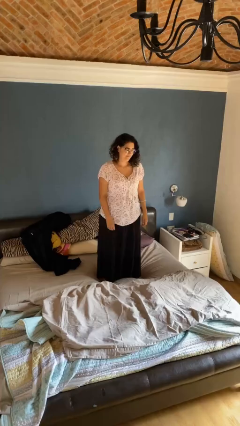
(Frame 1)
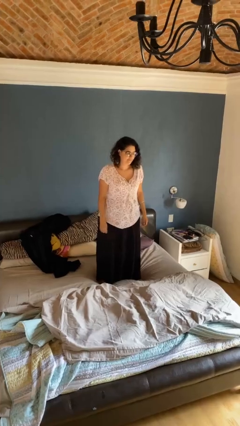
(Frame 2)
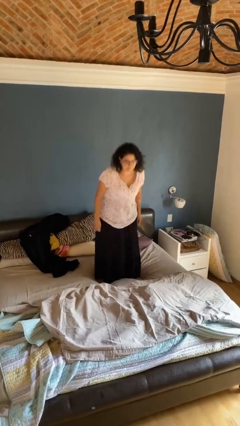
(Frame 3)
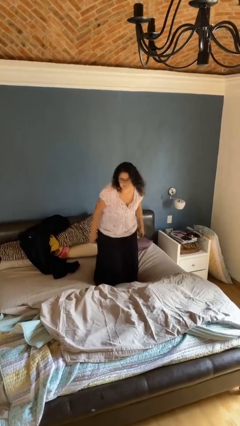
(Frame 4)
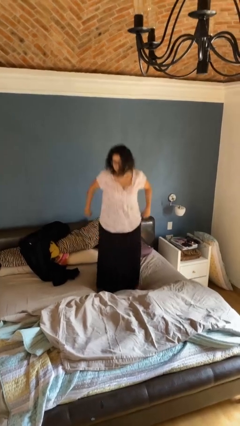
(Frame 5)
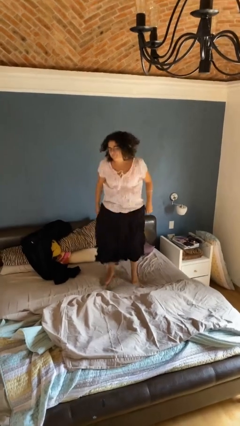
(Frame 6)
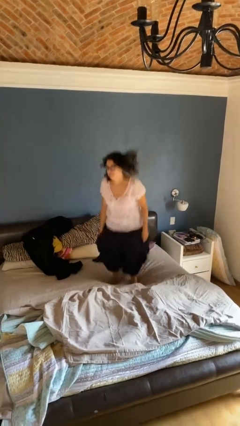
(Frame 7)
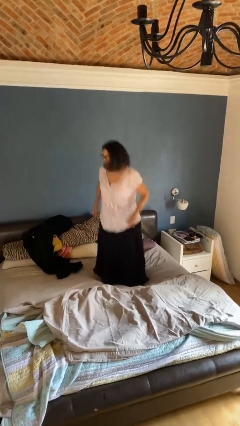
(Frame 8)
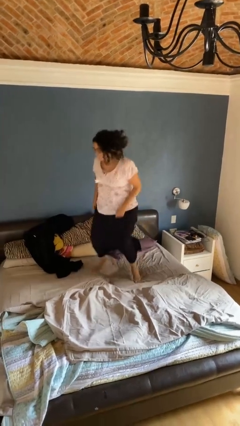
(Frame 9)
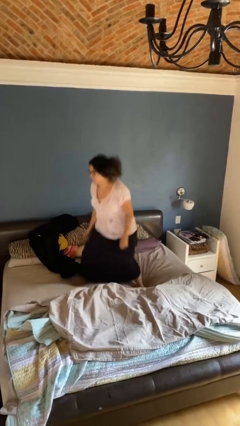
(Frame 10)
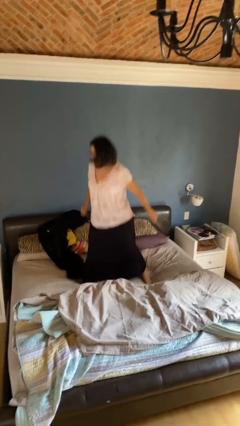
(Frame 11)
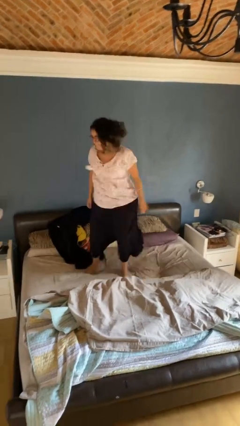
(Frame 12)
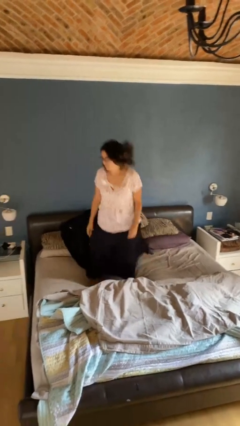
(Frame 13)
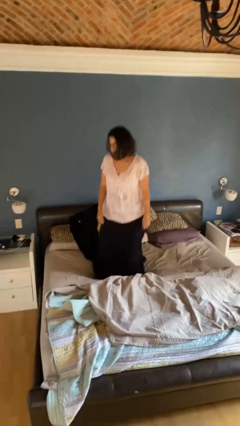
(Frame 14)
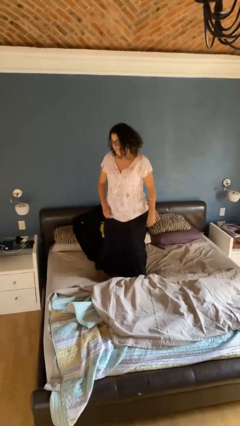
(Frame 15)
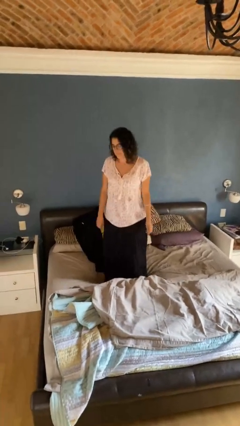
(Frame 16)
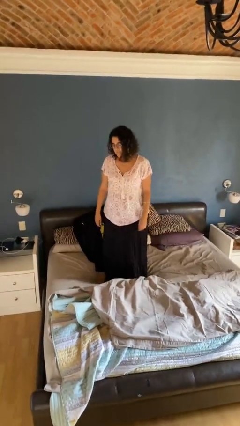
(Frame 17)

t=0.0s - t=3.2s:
person jumps on bed

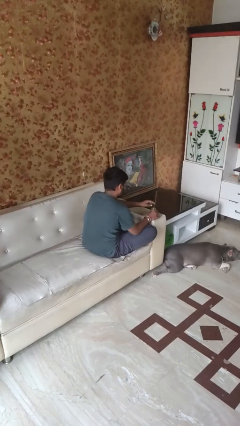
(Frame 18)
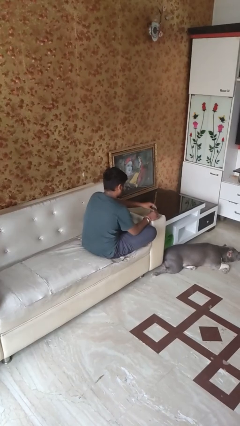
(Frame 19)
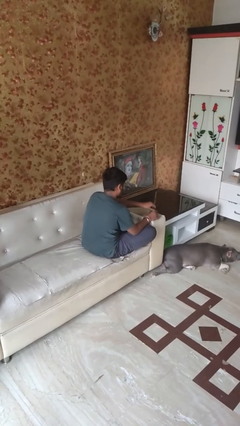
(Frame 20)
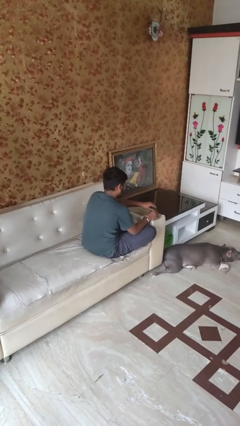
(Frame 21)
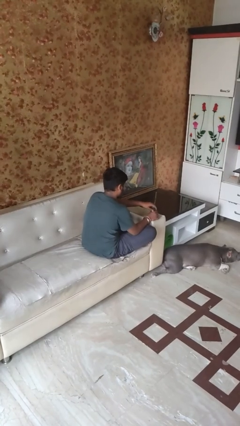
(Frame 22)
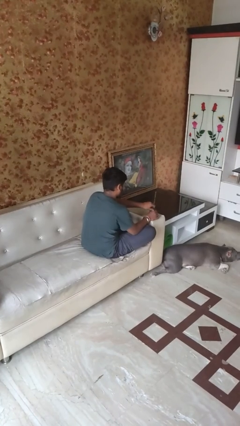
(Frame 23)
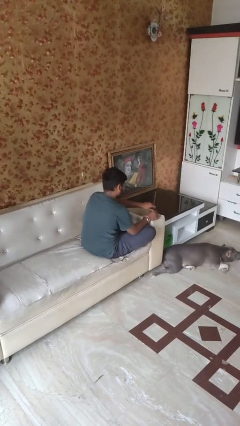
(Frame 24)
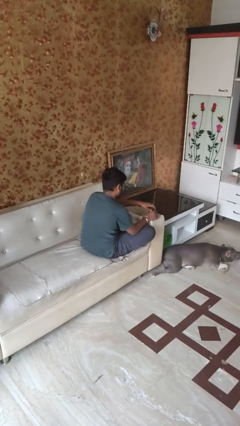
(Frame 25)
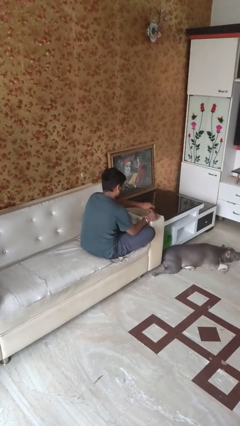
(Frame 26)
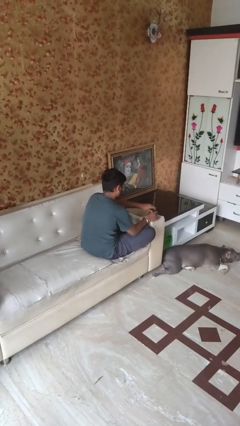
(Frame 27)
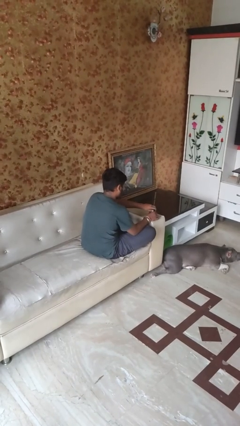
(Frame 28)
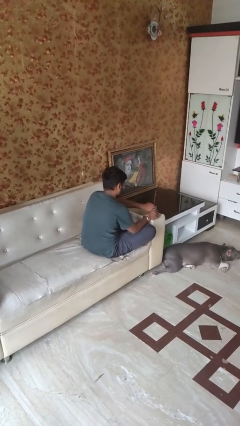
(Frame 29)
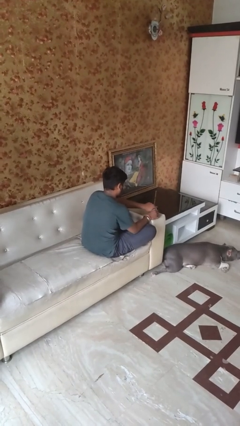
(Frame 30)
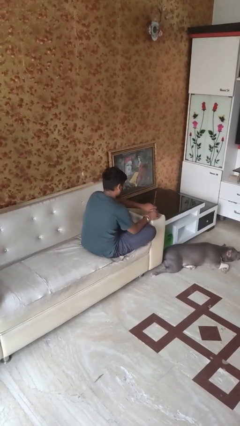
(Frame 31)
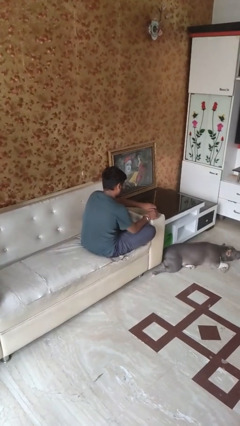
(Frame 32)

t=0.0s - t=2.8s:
person closes jar

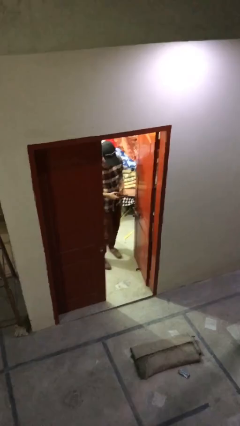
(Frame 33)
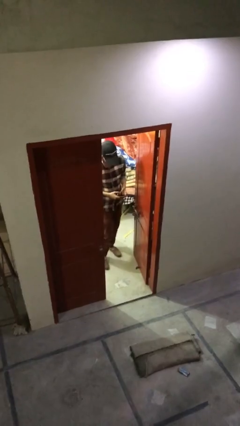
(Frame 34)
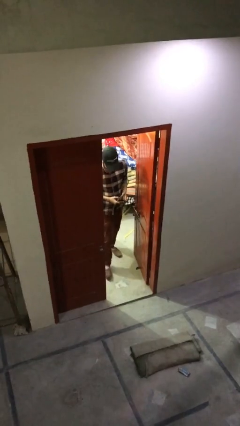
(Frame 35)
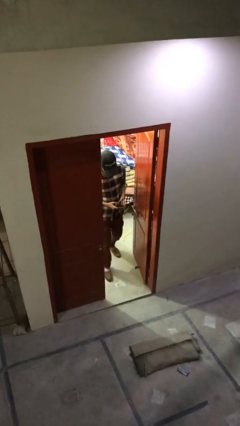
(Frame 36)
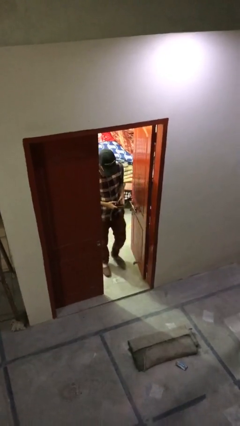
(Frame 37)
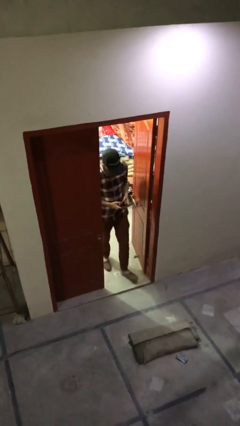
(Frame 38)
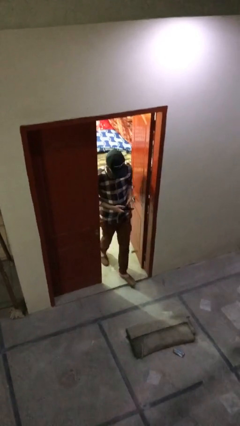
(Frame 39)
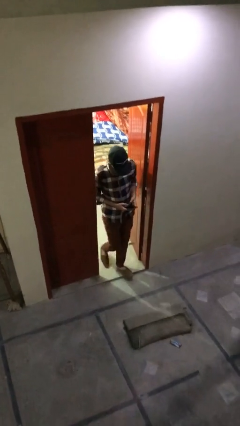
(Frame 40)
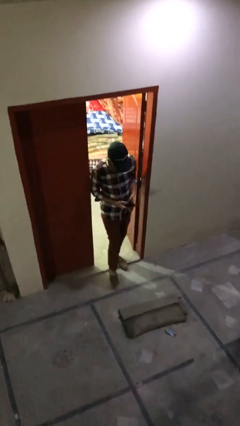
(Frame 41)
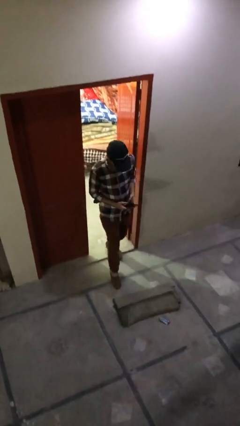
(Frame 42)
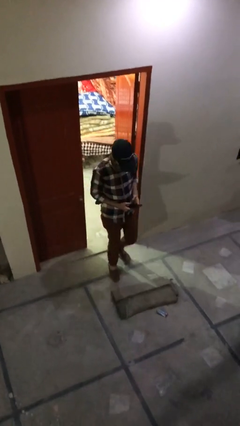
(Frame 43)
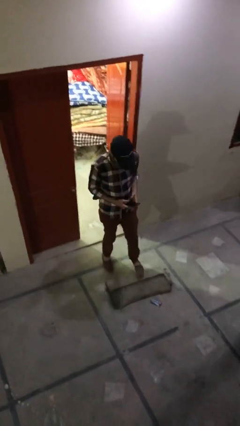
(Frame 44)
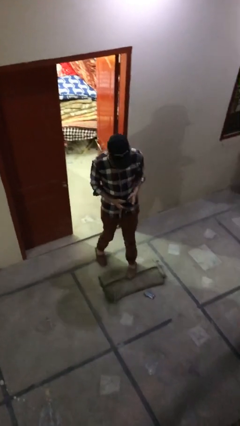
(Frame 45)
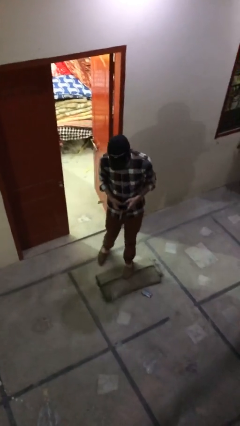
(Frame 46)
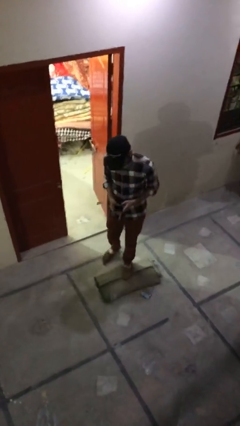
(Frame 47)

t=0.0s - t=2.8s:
person enters scene through structure

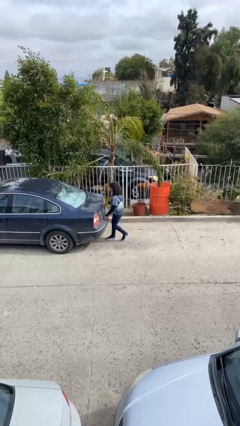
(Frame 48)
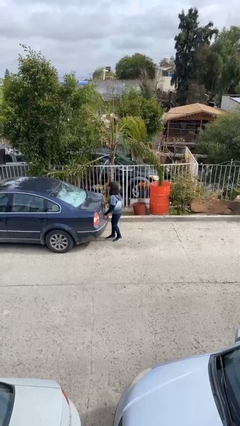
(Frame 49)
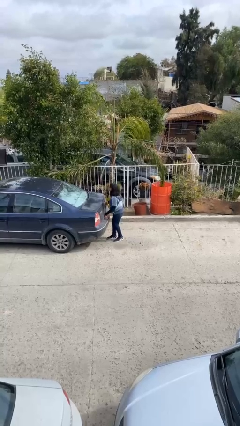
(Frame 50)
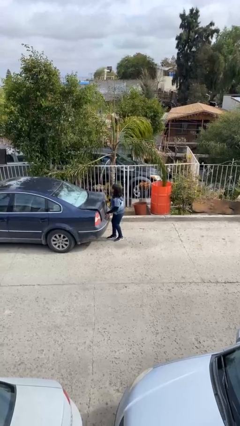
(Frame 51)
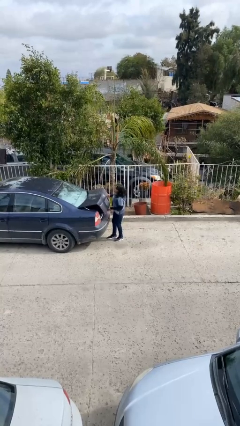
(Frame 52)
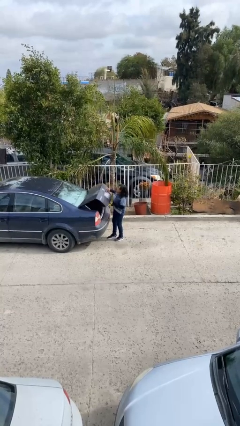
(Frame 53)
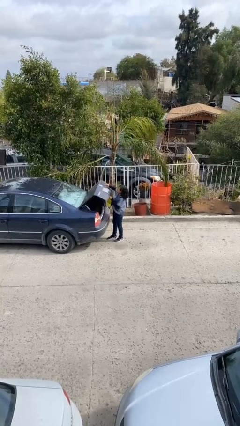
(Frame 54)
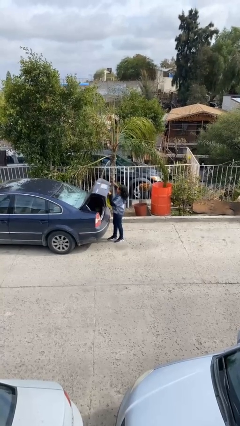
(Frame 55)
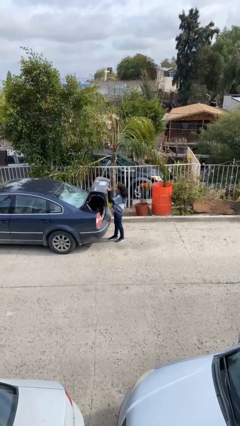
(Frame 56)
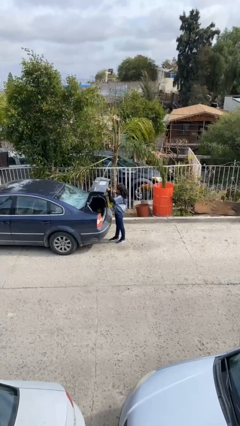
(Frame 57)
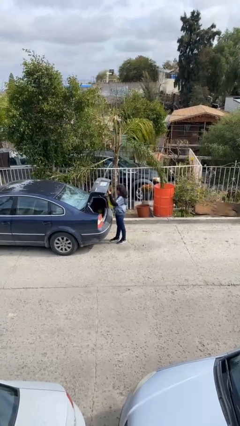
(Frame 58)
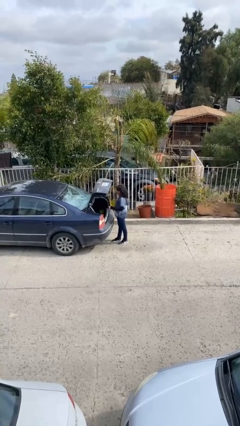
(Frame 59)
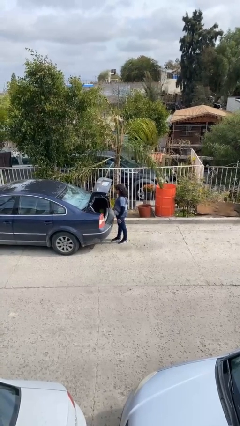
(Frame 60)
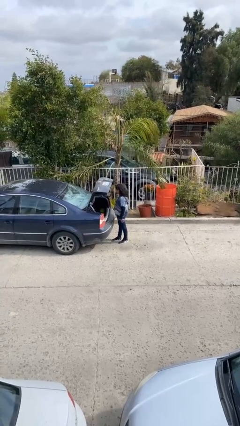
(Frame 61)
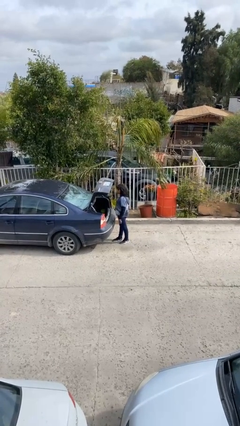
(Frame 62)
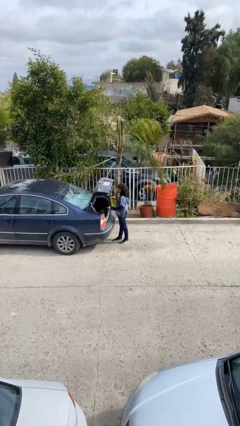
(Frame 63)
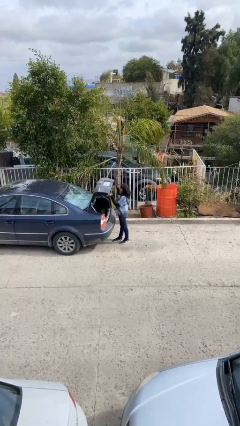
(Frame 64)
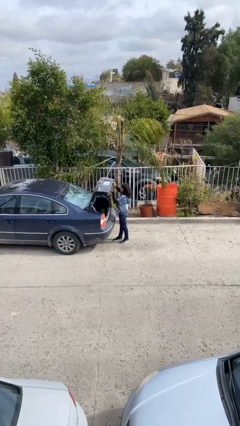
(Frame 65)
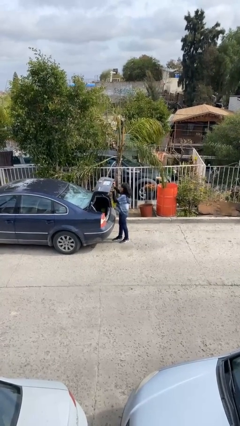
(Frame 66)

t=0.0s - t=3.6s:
person opens car trunk

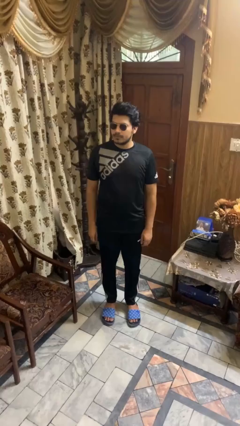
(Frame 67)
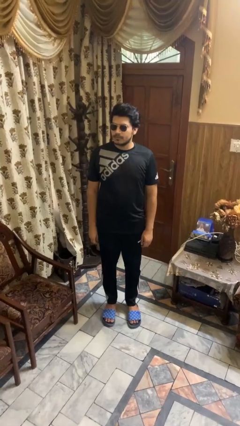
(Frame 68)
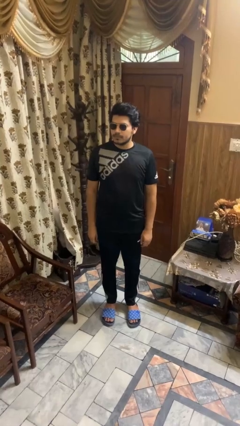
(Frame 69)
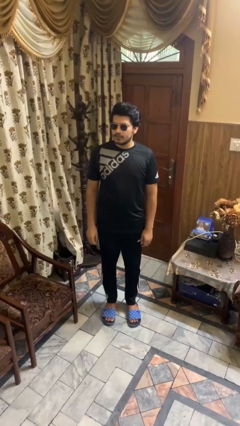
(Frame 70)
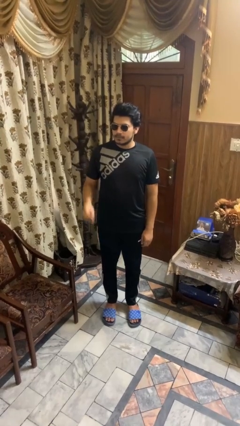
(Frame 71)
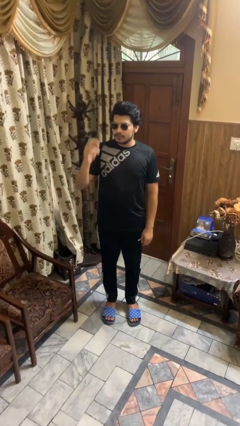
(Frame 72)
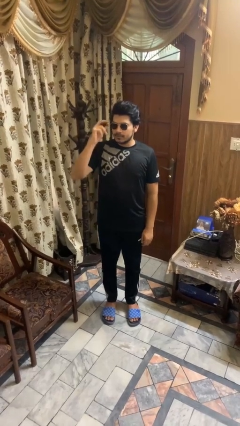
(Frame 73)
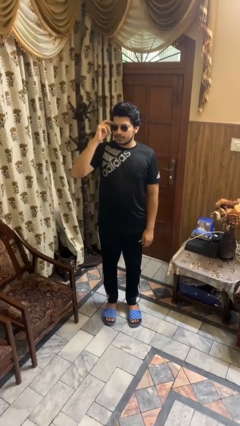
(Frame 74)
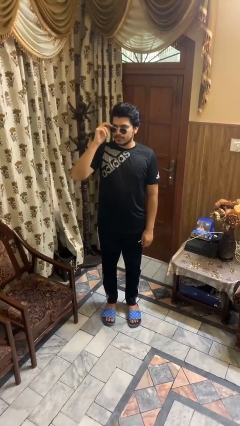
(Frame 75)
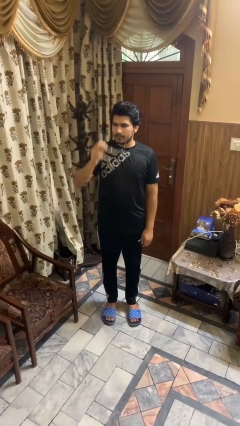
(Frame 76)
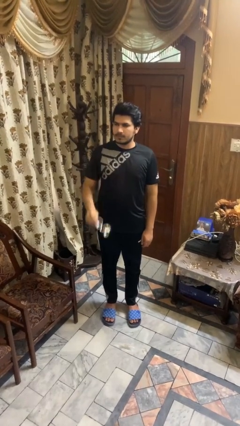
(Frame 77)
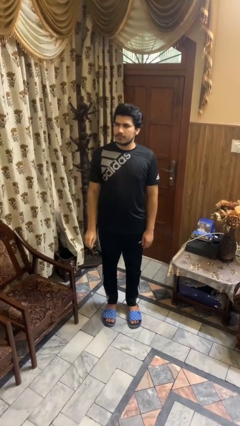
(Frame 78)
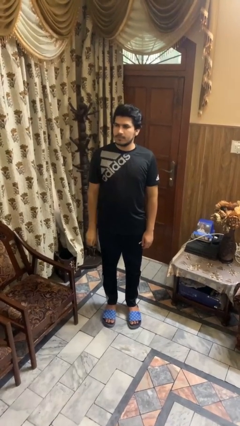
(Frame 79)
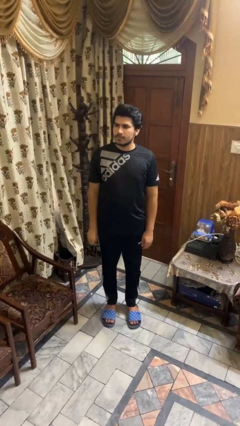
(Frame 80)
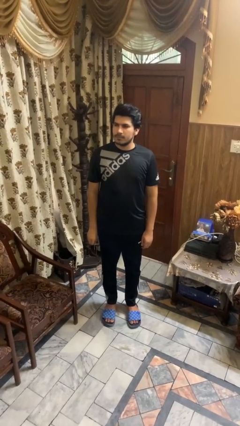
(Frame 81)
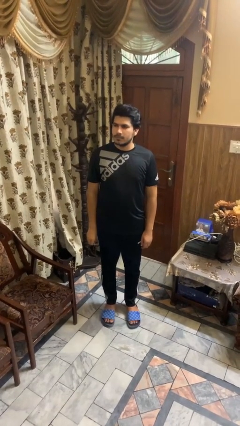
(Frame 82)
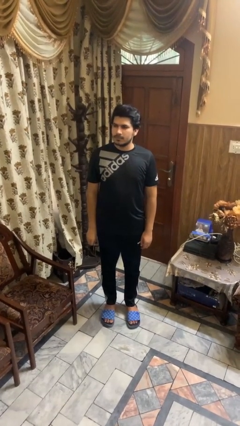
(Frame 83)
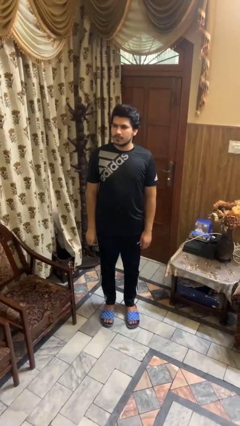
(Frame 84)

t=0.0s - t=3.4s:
person takes off sunglasses

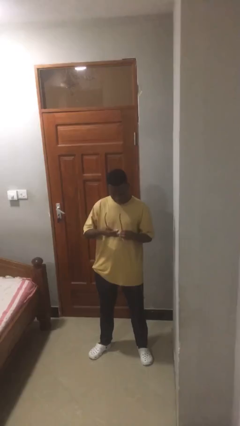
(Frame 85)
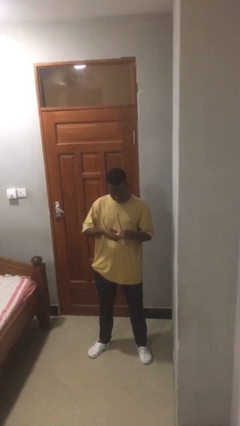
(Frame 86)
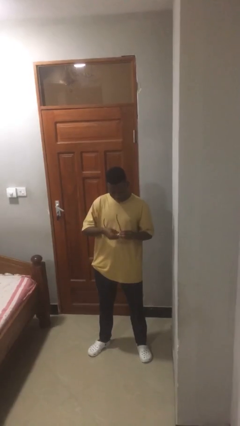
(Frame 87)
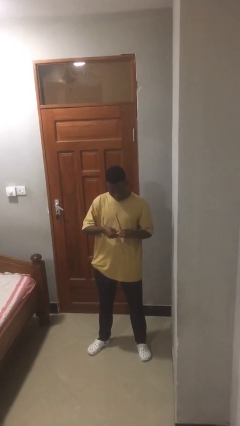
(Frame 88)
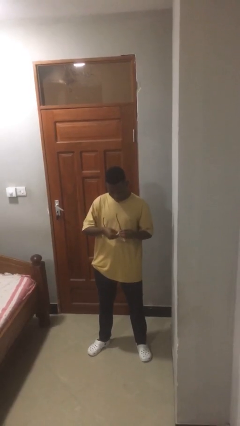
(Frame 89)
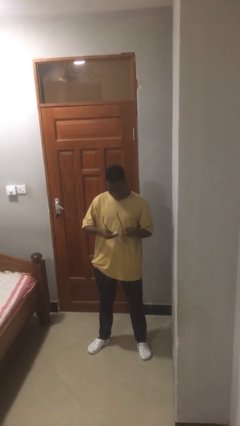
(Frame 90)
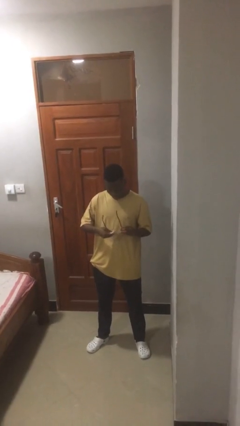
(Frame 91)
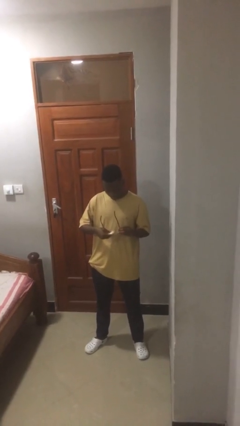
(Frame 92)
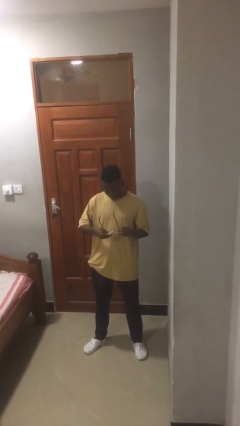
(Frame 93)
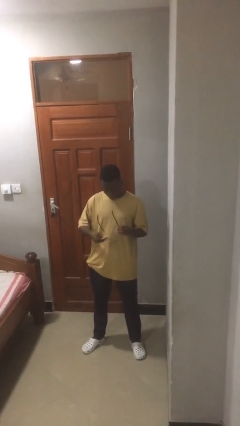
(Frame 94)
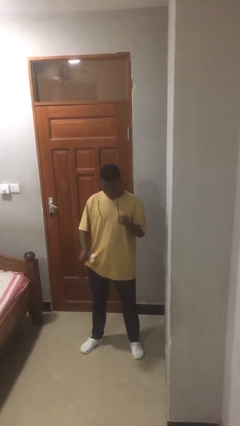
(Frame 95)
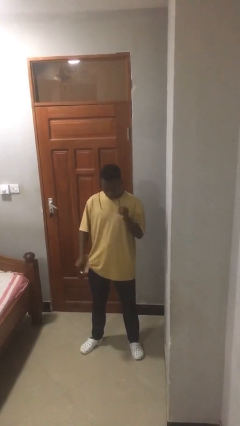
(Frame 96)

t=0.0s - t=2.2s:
person cleans eyeglasses
